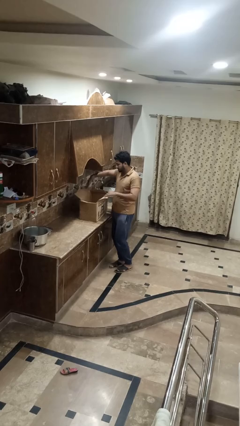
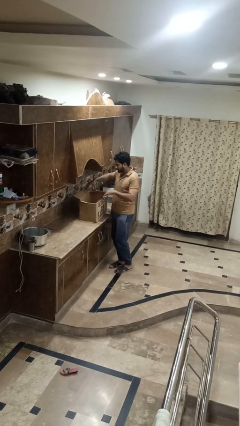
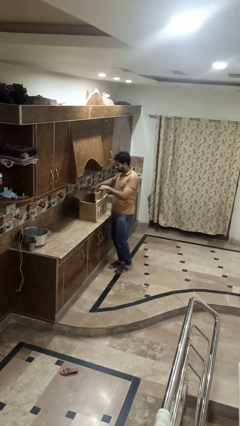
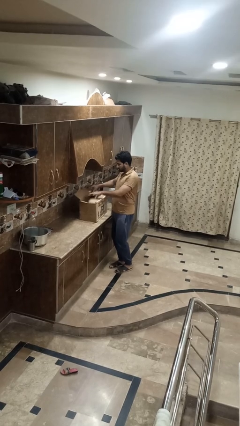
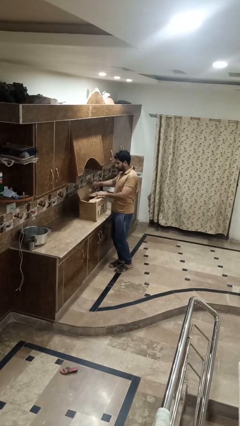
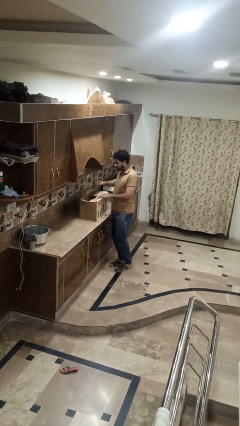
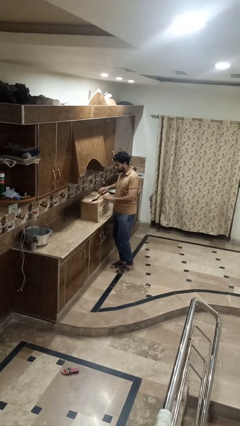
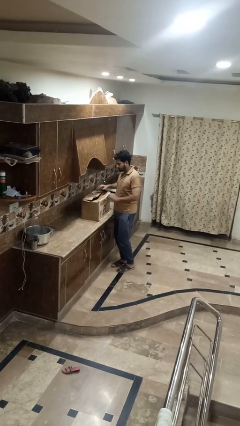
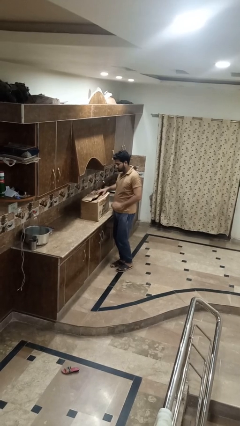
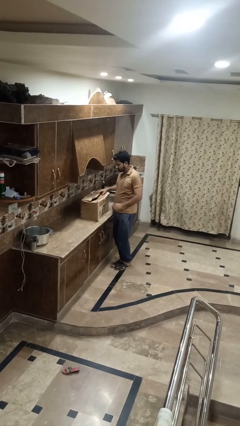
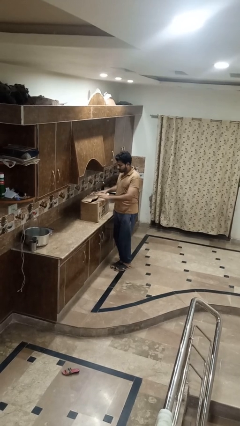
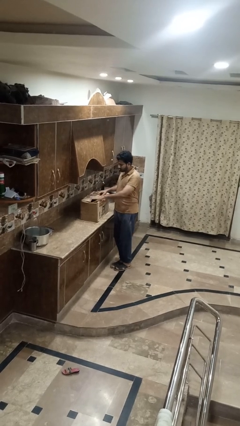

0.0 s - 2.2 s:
person closes box

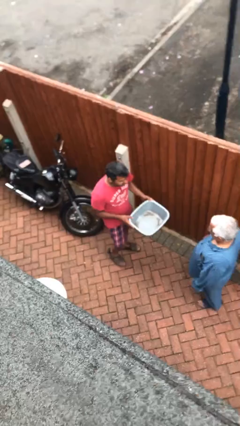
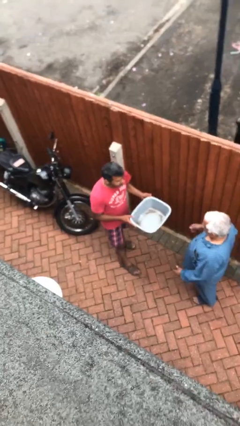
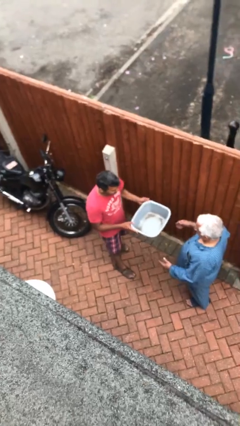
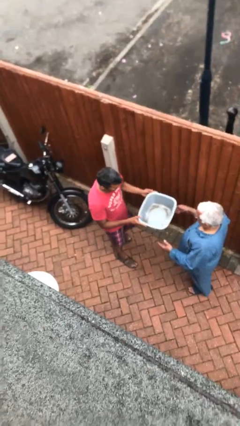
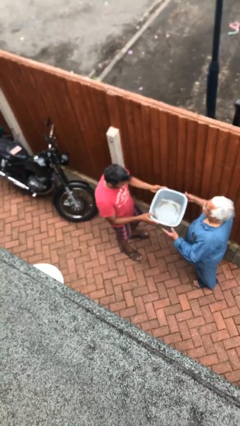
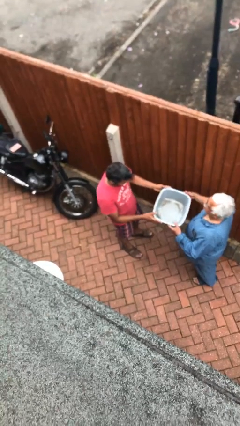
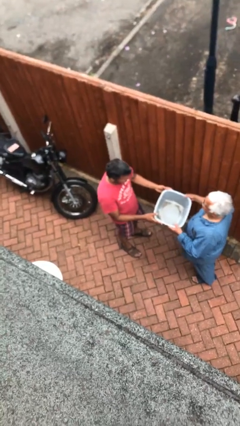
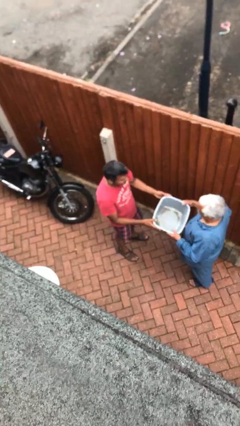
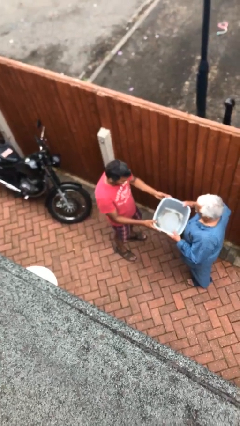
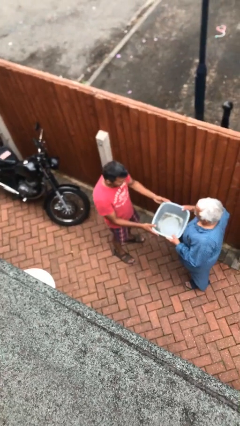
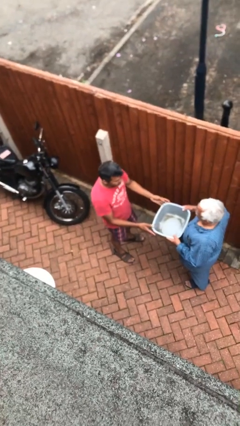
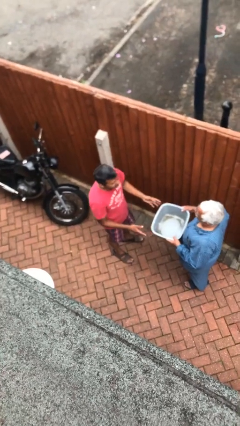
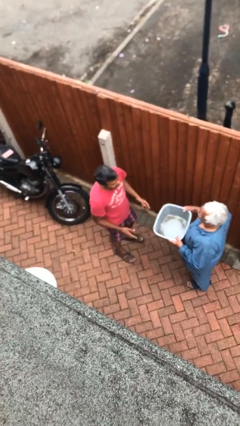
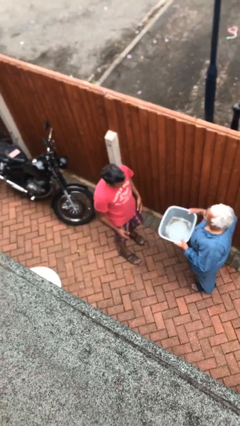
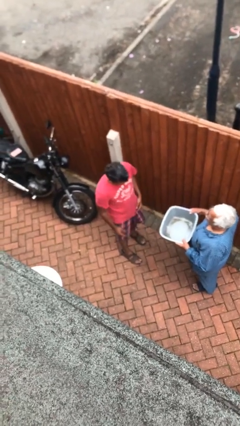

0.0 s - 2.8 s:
person transfers object to person

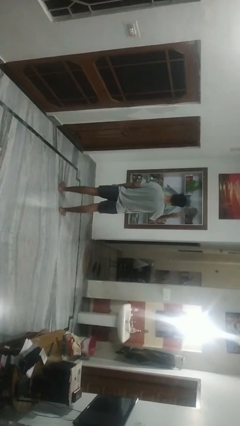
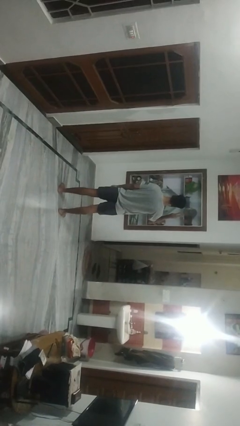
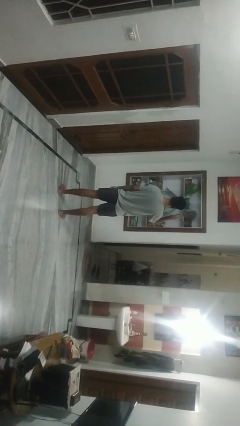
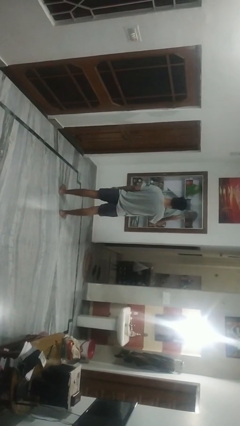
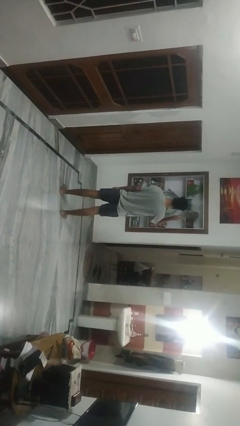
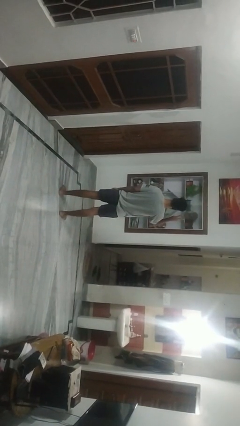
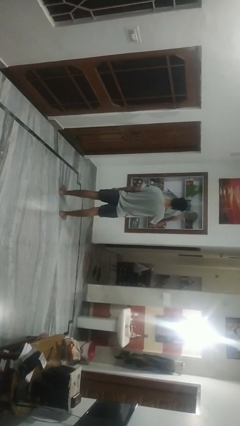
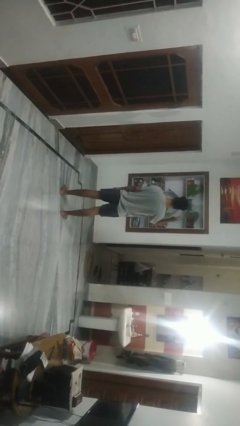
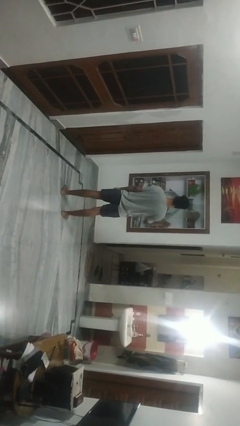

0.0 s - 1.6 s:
person gestures peace

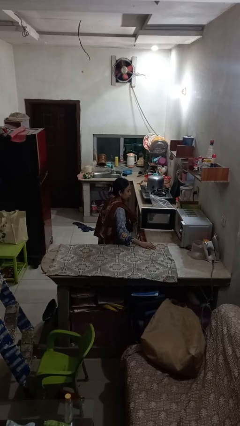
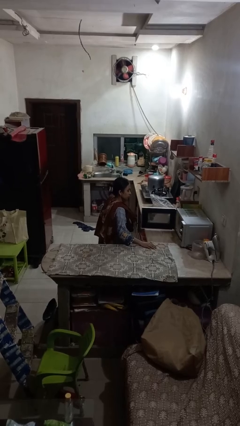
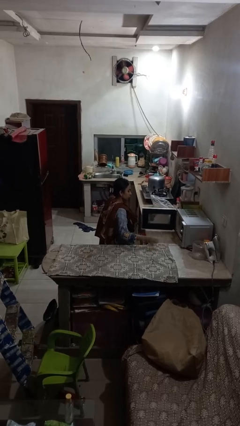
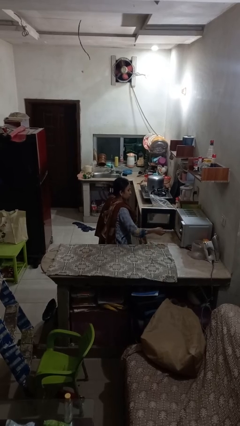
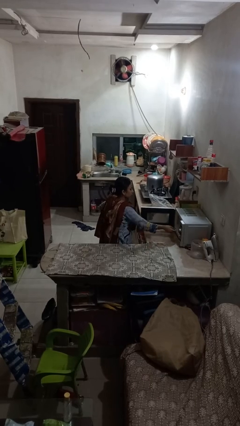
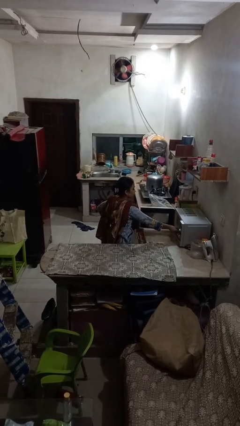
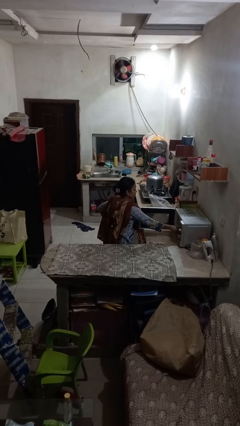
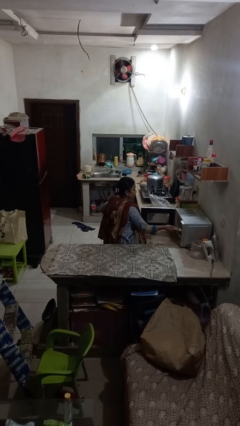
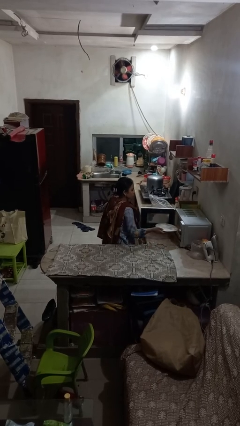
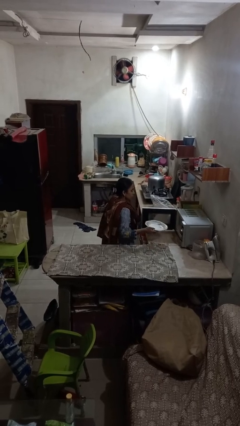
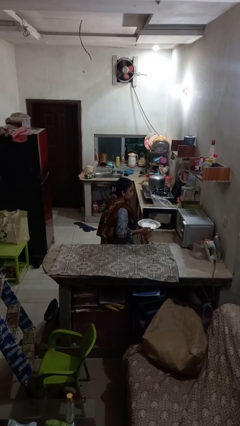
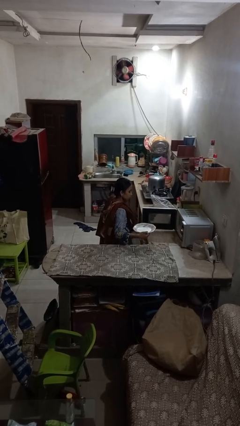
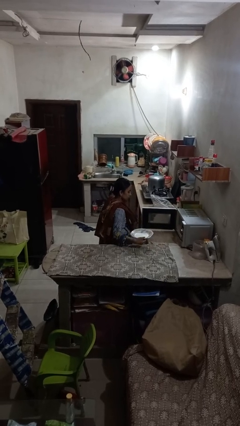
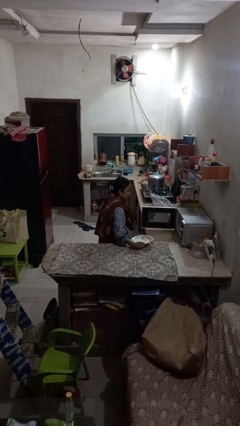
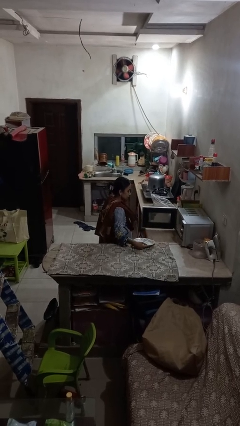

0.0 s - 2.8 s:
person takes object from microwave

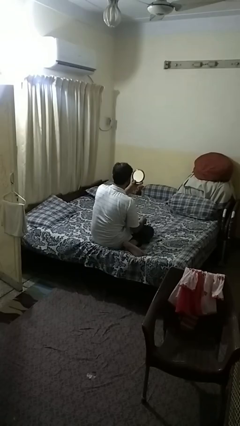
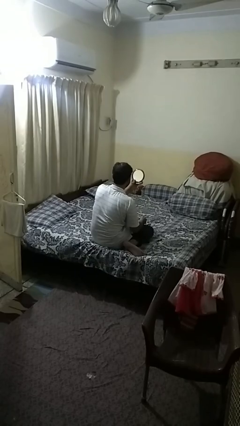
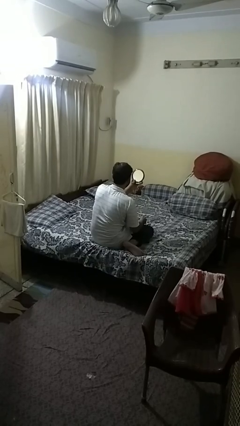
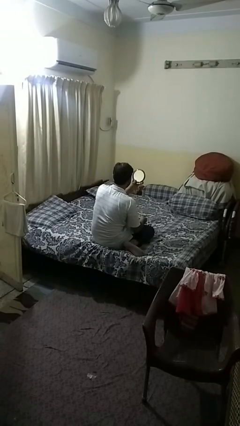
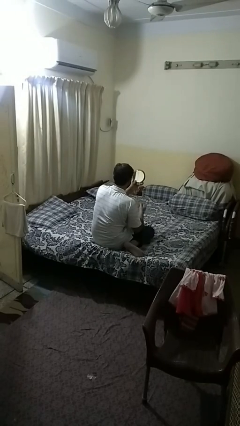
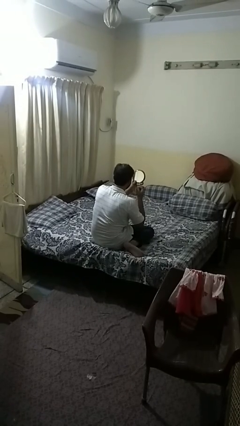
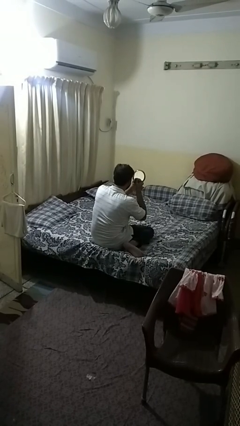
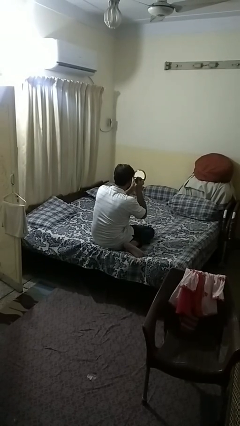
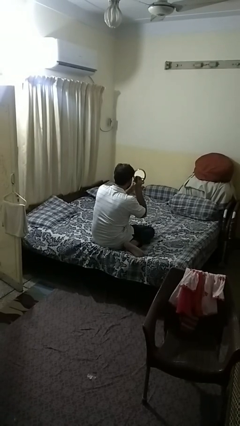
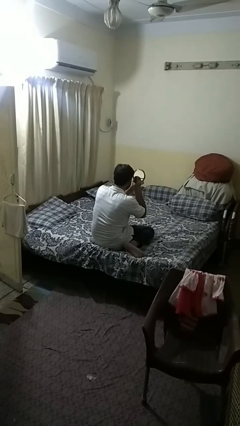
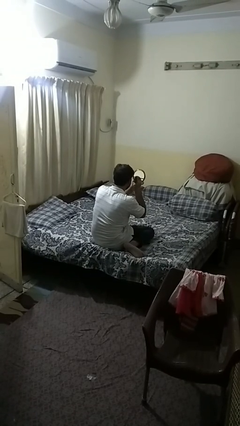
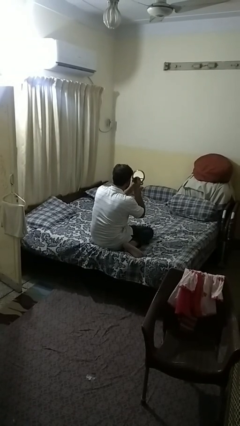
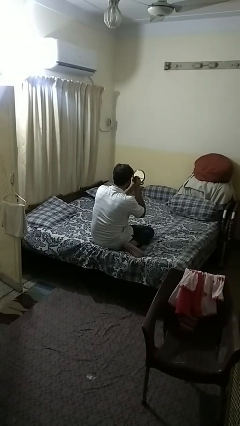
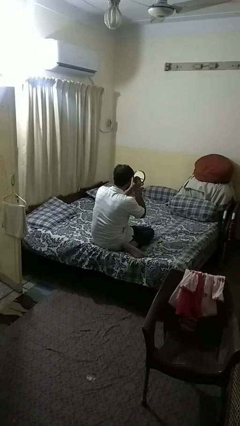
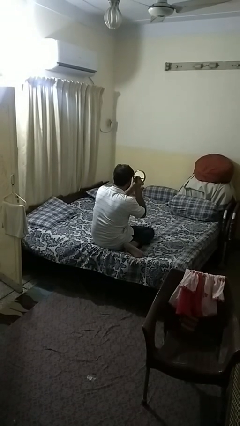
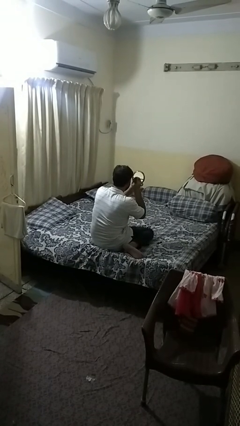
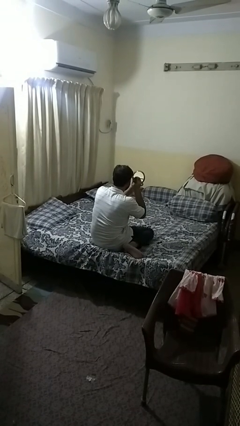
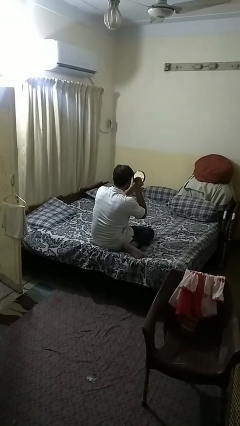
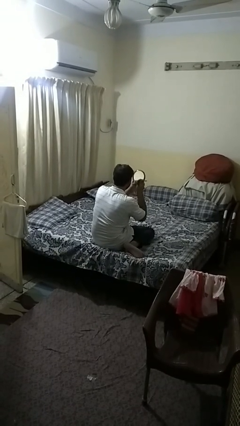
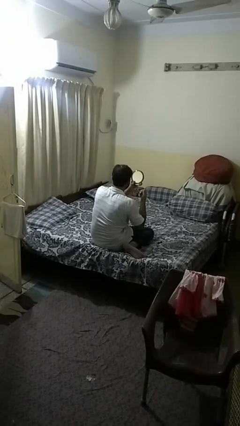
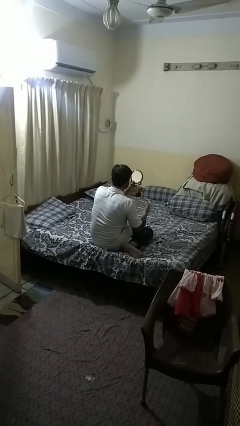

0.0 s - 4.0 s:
person applies eye makeup

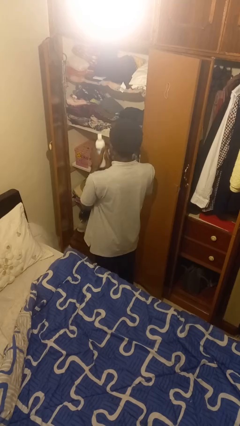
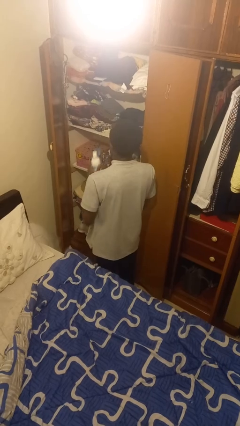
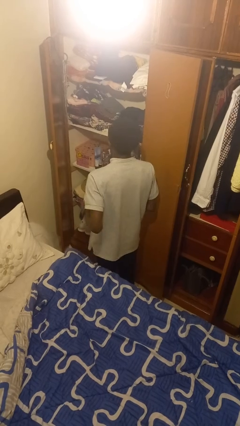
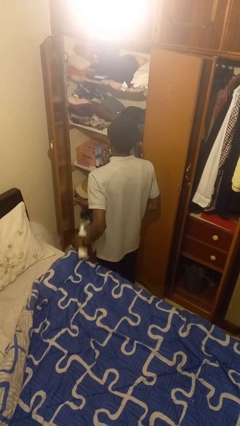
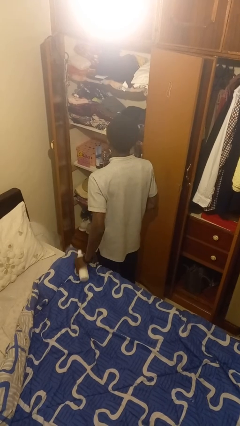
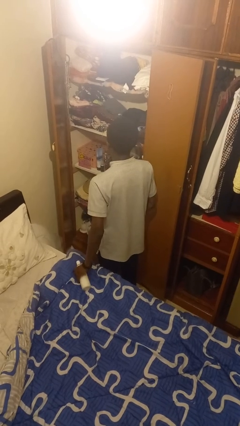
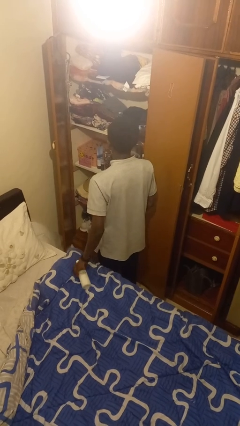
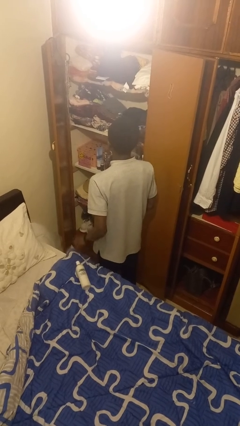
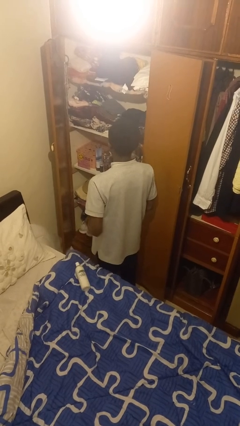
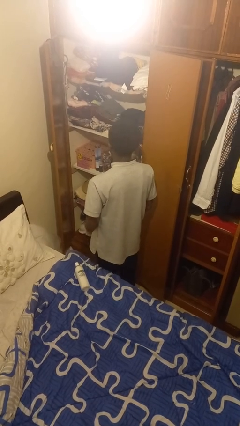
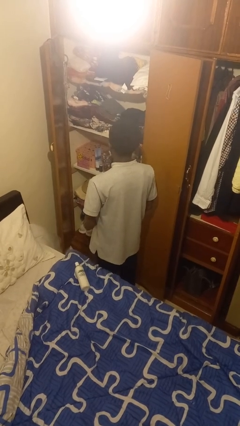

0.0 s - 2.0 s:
person puts down object on bed

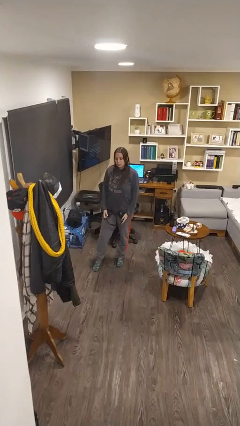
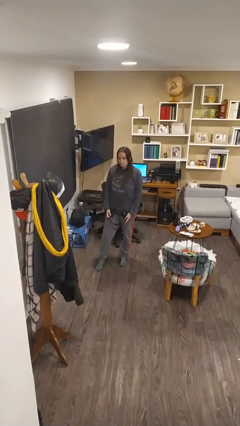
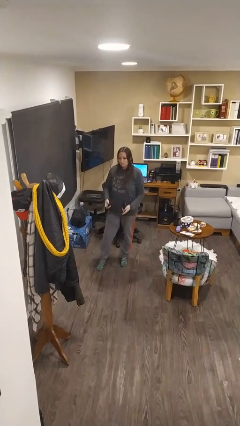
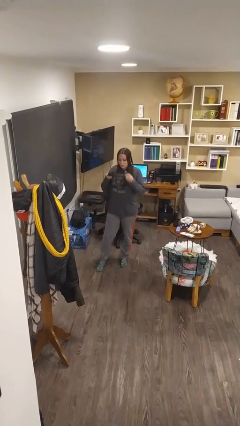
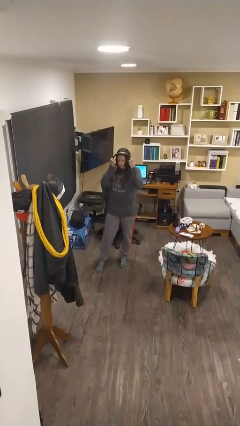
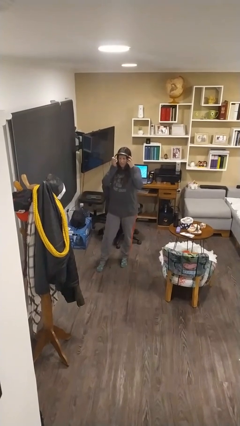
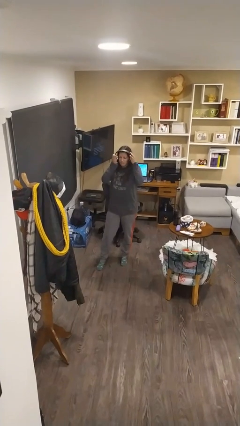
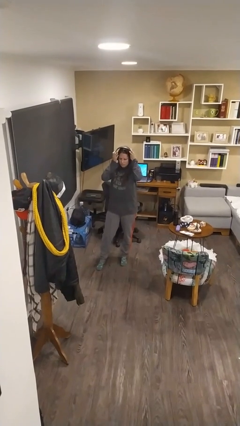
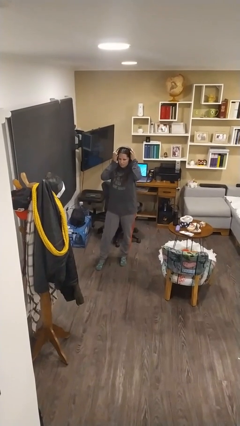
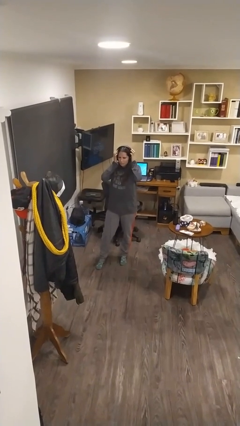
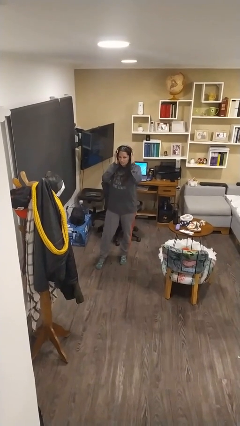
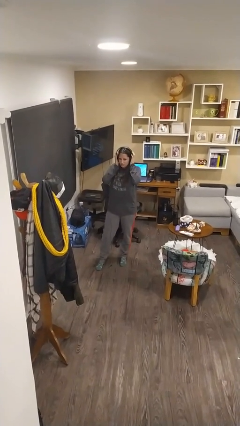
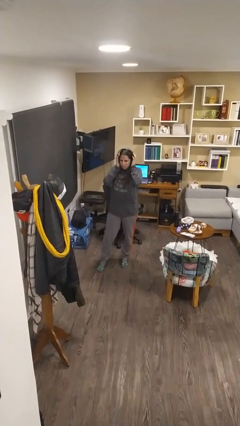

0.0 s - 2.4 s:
person puts on headphones
